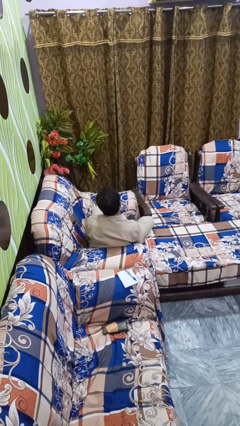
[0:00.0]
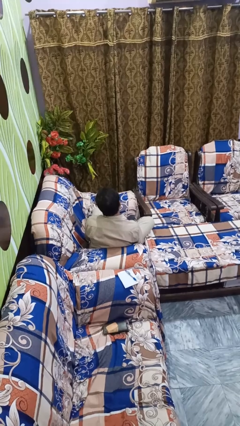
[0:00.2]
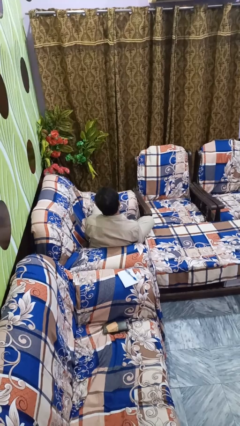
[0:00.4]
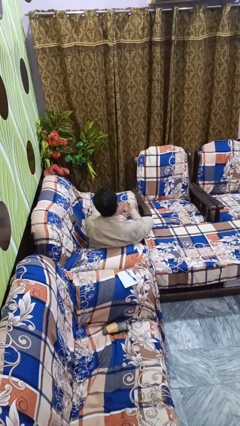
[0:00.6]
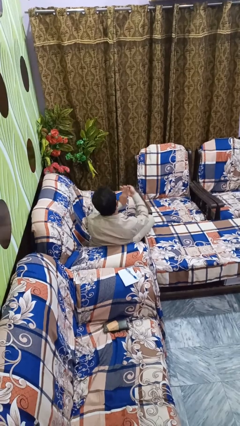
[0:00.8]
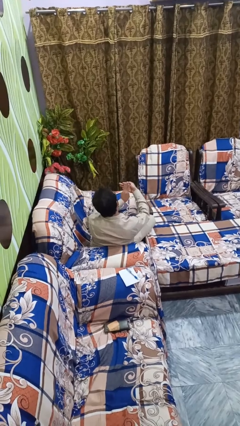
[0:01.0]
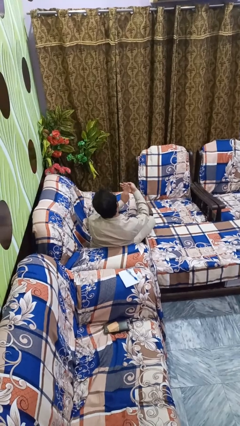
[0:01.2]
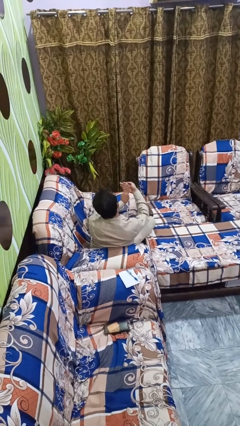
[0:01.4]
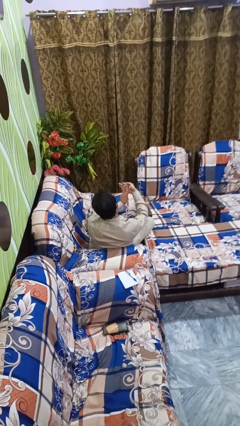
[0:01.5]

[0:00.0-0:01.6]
person gestures number three

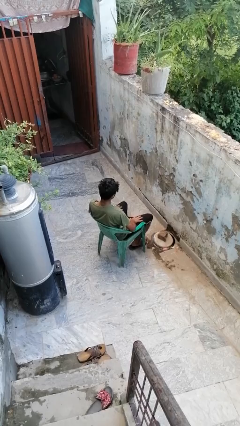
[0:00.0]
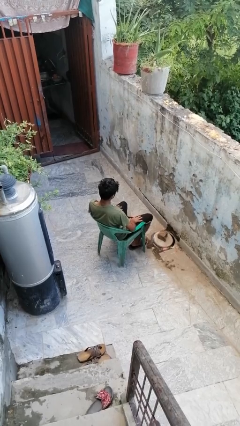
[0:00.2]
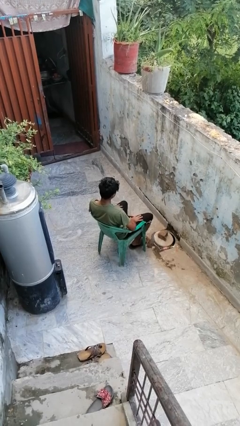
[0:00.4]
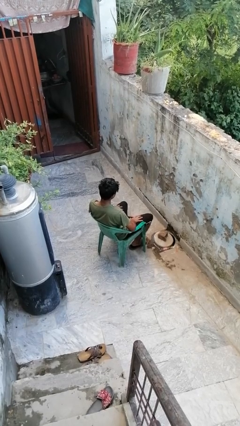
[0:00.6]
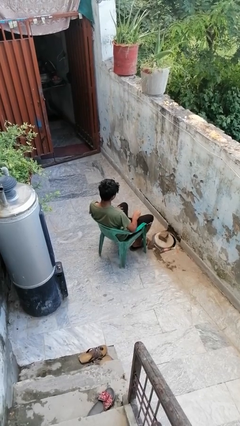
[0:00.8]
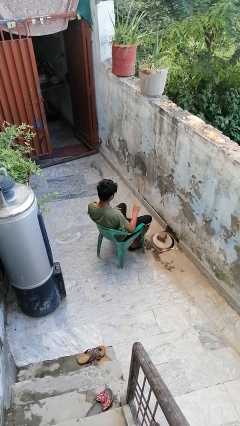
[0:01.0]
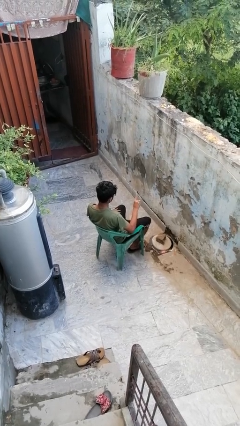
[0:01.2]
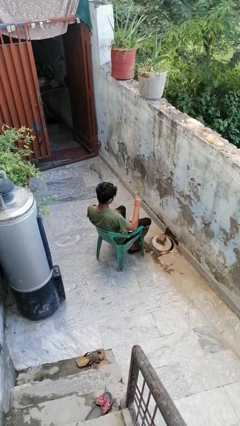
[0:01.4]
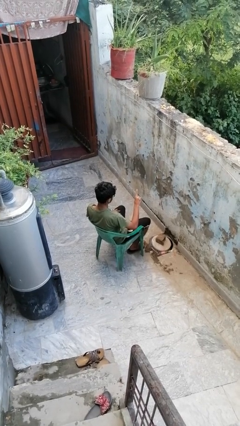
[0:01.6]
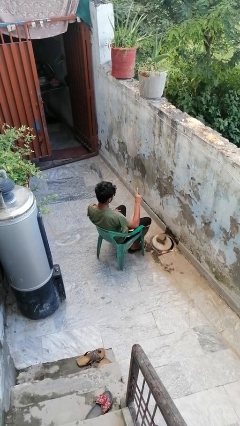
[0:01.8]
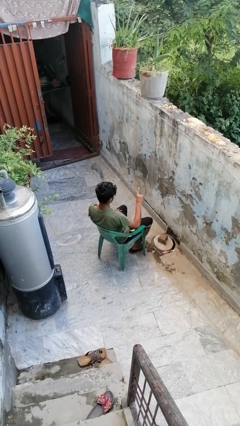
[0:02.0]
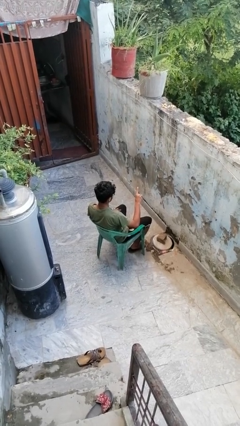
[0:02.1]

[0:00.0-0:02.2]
person gestures number one

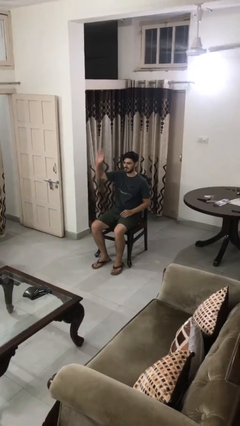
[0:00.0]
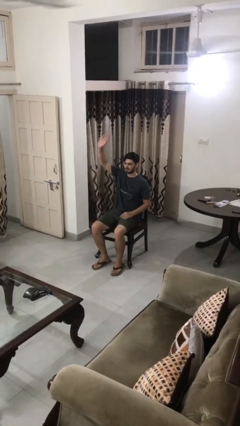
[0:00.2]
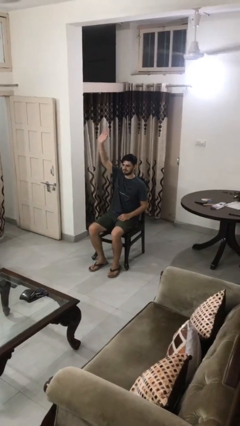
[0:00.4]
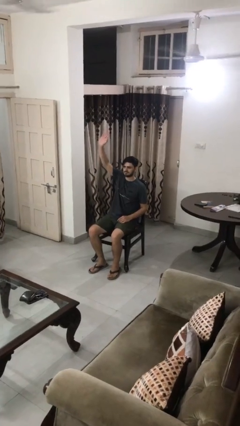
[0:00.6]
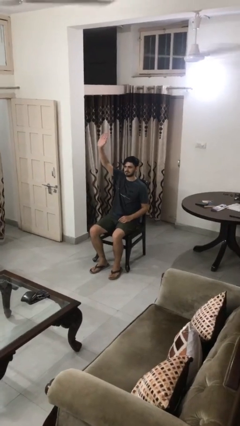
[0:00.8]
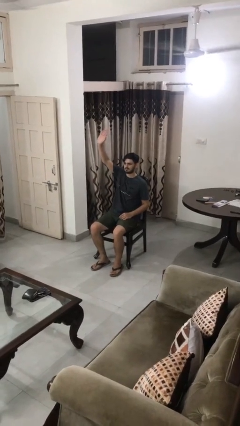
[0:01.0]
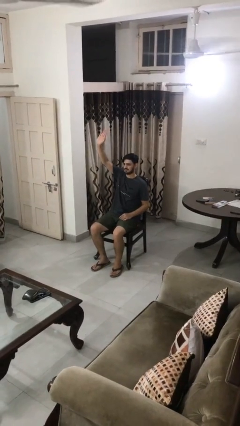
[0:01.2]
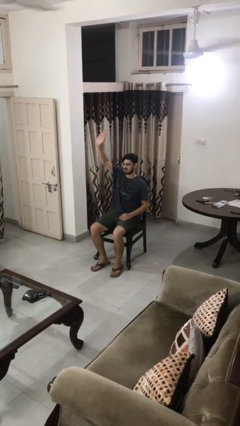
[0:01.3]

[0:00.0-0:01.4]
person gestures raise hand

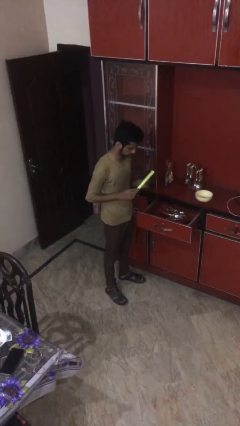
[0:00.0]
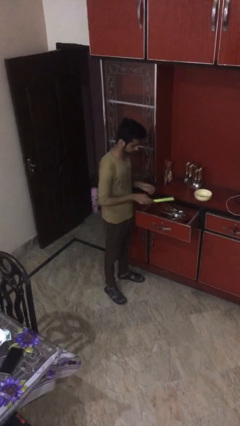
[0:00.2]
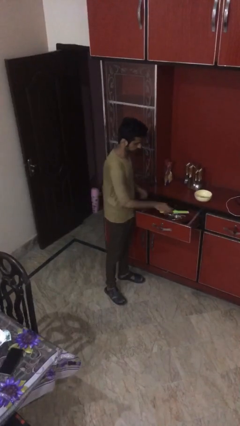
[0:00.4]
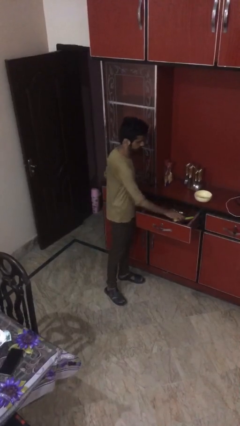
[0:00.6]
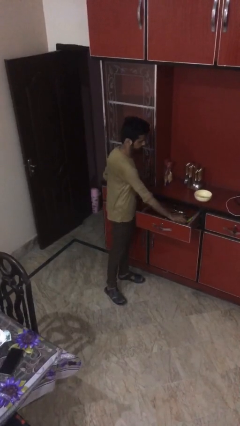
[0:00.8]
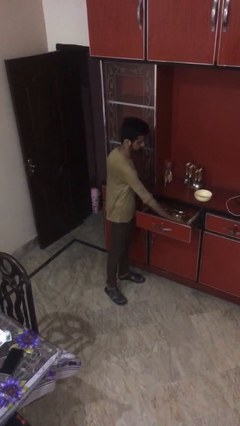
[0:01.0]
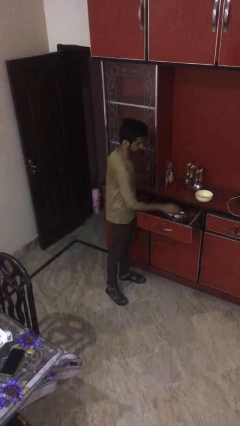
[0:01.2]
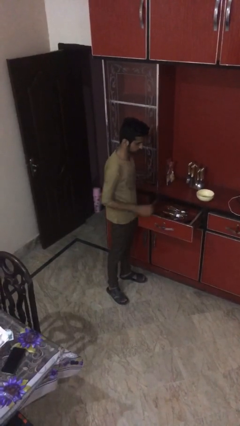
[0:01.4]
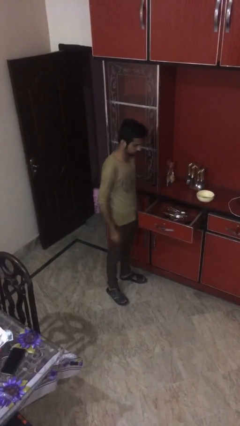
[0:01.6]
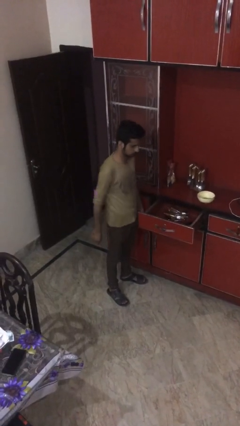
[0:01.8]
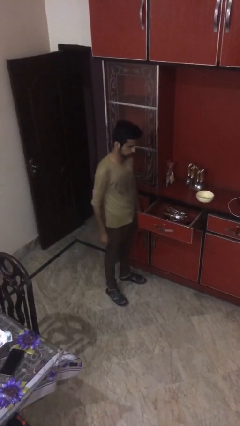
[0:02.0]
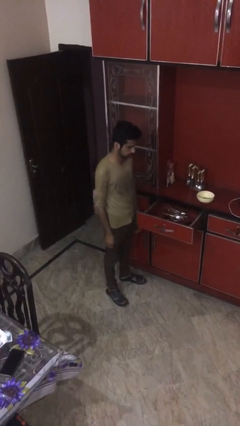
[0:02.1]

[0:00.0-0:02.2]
person puts object into kitchen drawer

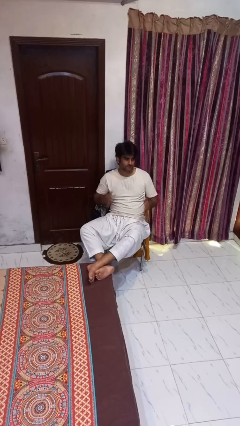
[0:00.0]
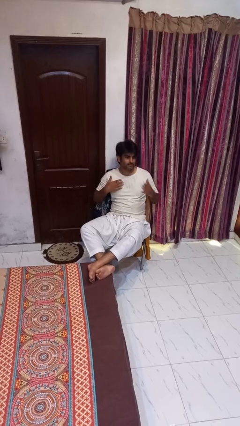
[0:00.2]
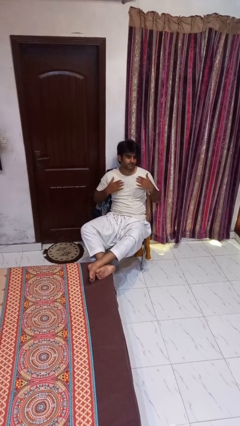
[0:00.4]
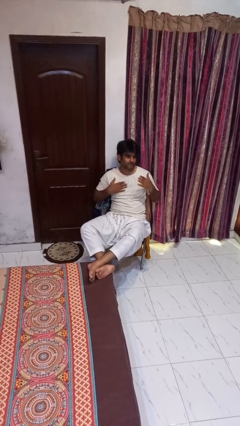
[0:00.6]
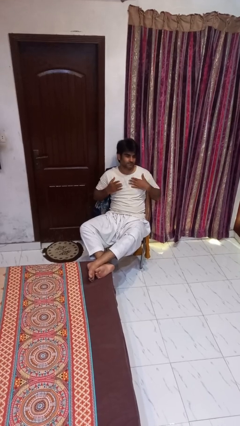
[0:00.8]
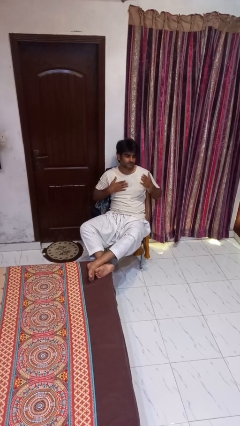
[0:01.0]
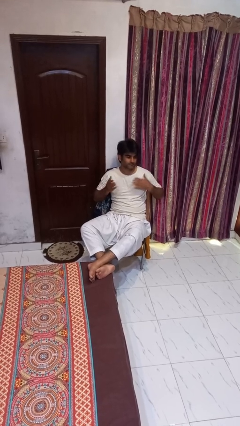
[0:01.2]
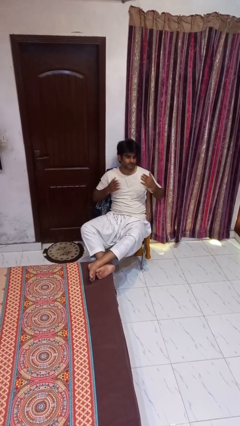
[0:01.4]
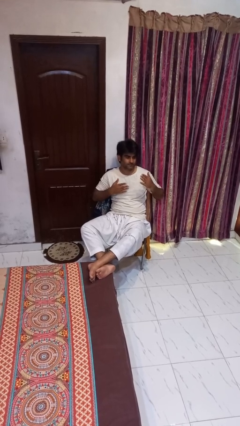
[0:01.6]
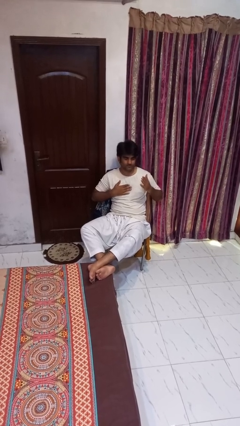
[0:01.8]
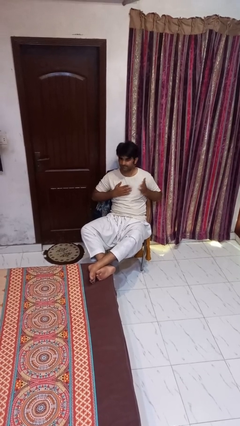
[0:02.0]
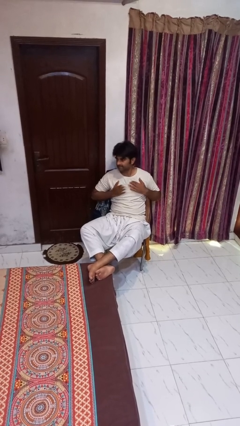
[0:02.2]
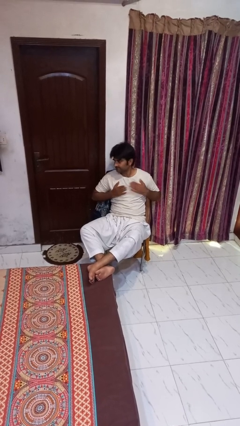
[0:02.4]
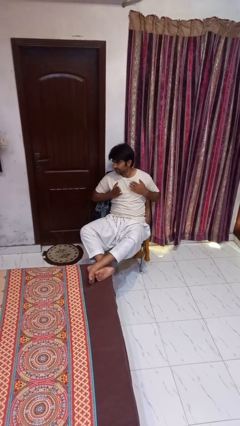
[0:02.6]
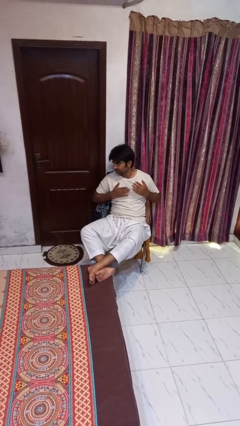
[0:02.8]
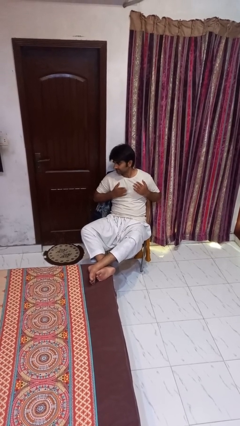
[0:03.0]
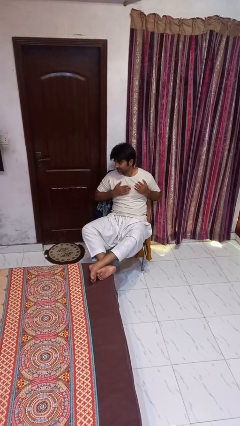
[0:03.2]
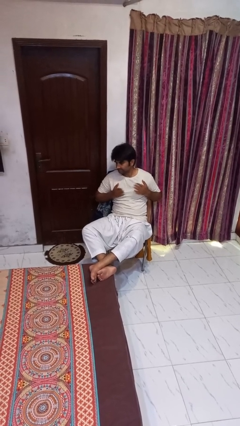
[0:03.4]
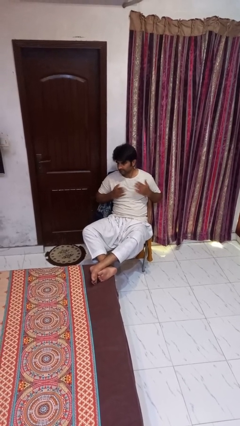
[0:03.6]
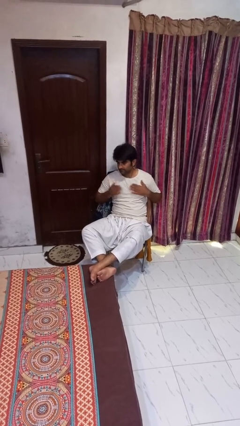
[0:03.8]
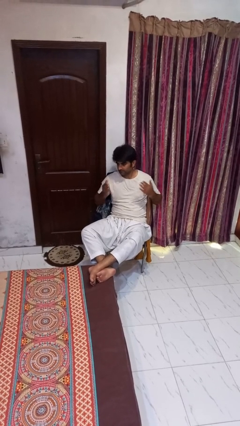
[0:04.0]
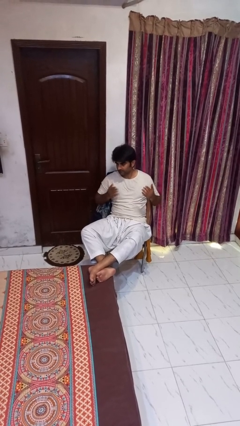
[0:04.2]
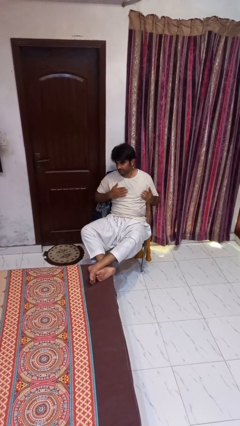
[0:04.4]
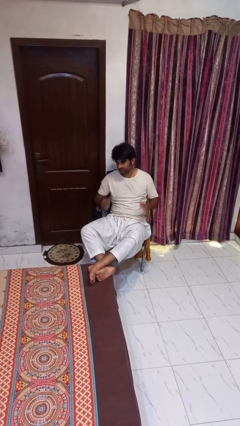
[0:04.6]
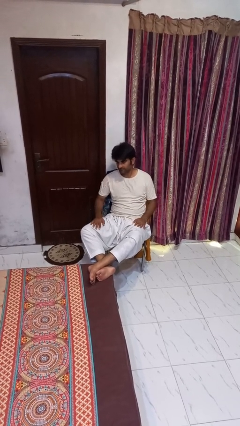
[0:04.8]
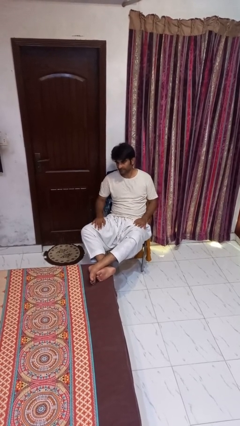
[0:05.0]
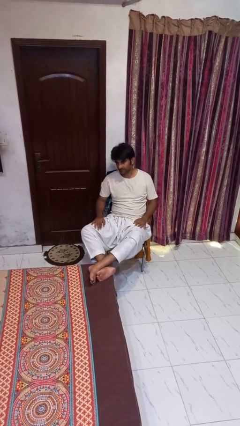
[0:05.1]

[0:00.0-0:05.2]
person drums on chest

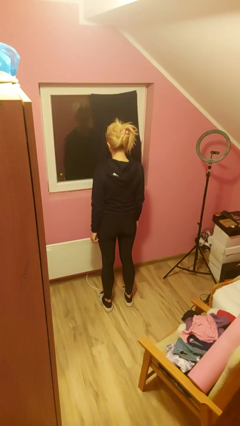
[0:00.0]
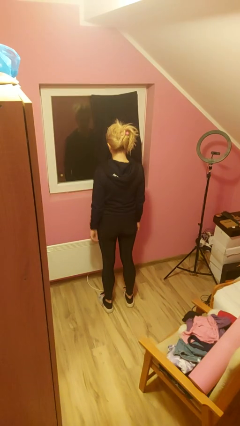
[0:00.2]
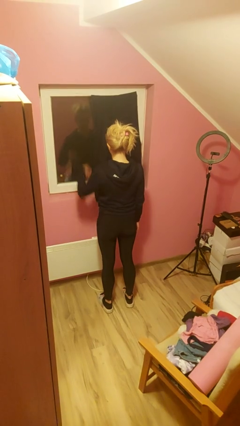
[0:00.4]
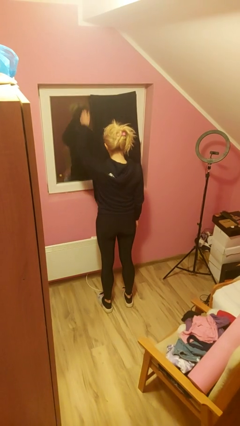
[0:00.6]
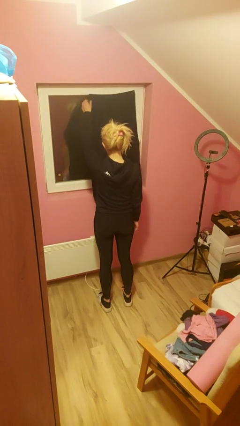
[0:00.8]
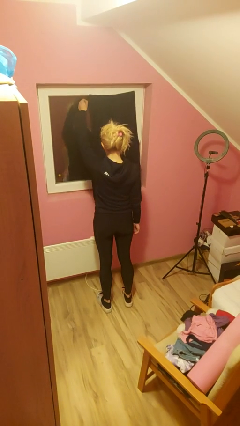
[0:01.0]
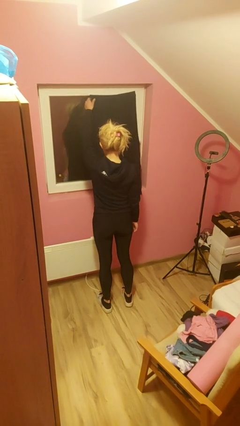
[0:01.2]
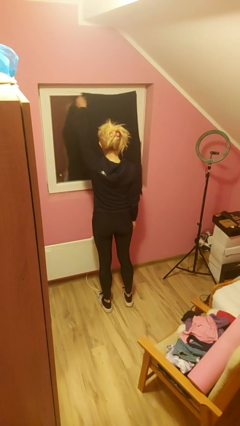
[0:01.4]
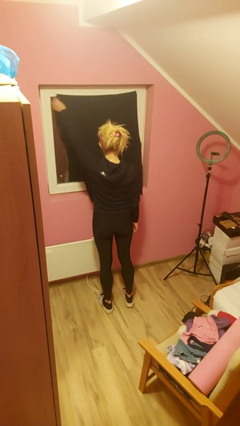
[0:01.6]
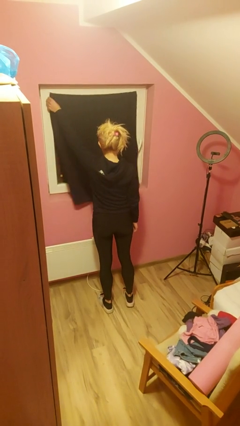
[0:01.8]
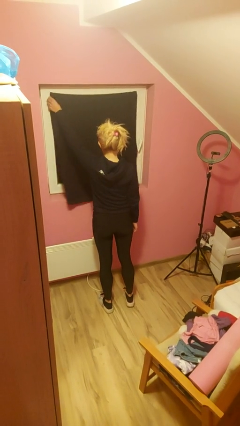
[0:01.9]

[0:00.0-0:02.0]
person closes curtains

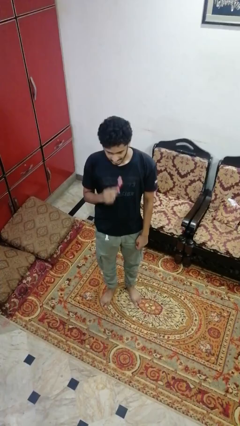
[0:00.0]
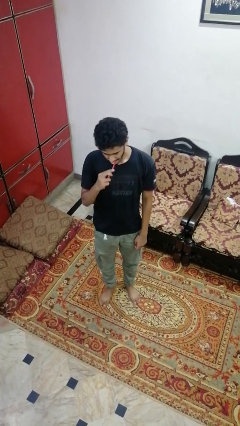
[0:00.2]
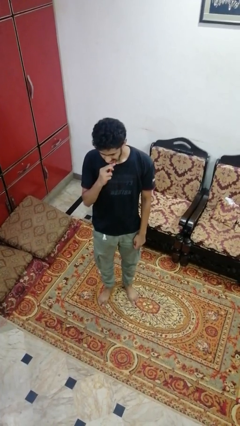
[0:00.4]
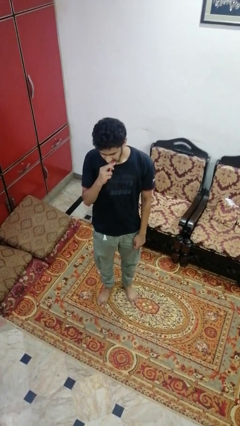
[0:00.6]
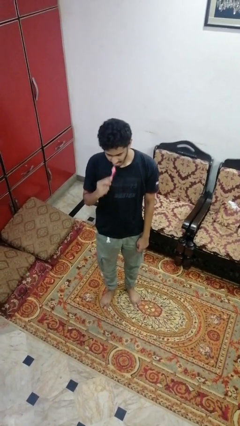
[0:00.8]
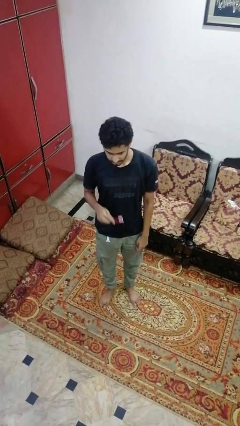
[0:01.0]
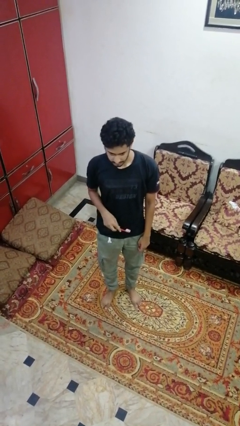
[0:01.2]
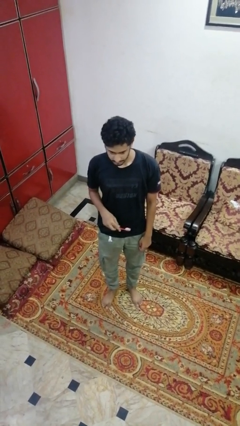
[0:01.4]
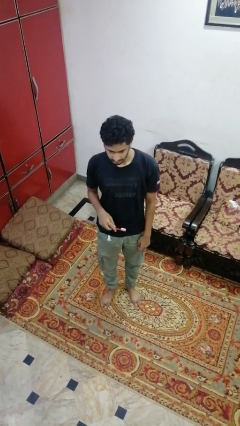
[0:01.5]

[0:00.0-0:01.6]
person brushes teeth

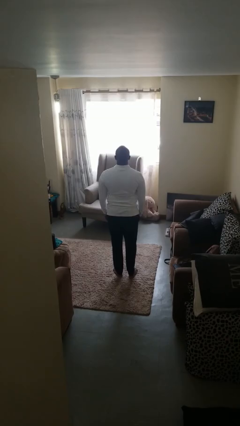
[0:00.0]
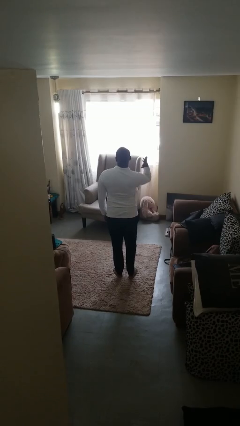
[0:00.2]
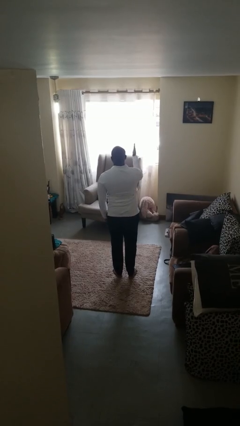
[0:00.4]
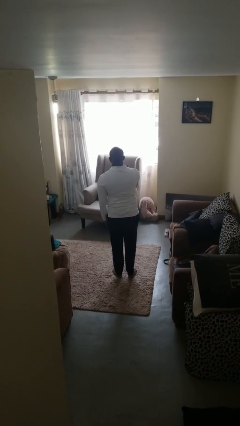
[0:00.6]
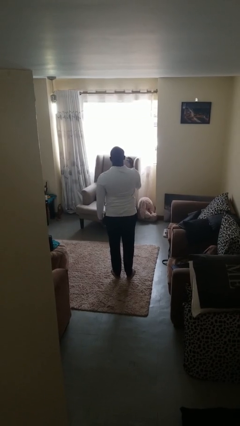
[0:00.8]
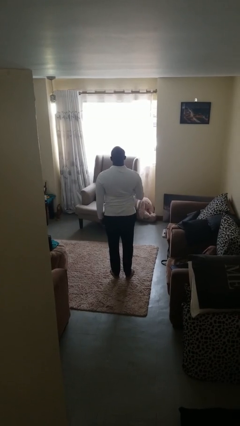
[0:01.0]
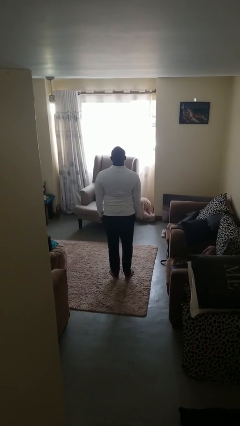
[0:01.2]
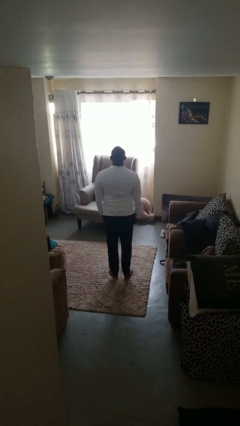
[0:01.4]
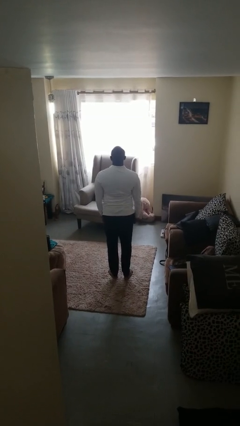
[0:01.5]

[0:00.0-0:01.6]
person karate chop
